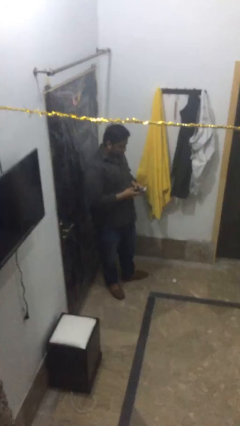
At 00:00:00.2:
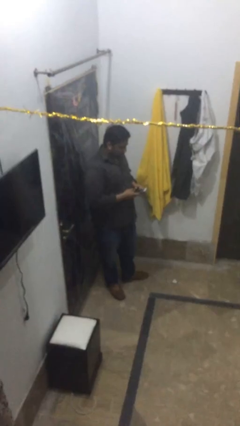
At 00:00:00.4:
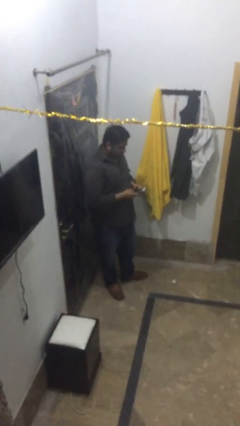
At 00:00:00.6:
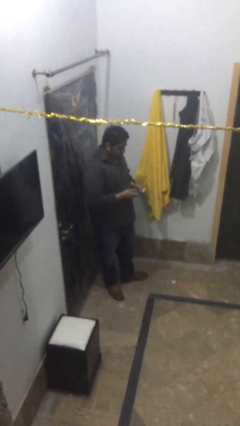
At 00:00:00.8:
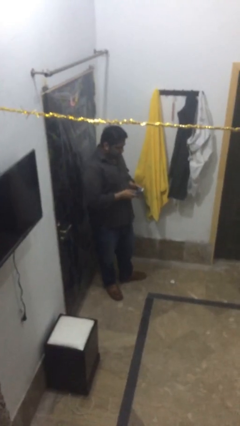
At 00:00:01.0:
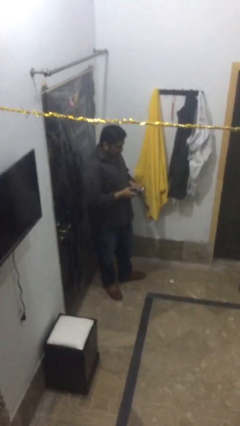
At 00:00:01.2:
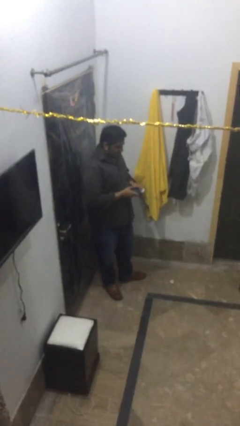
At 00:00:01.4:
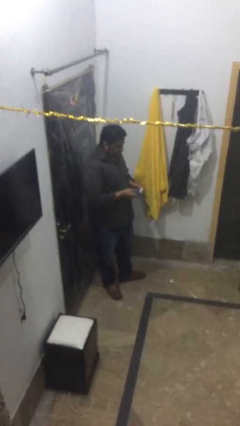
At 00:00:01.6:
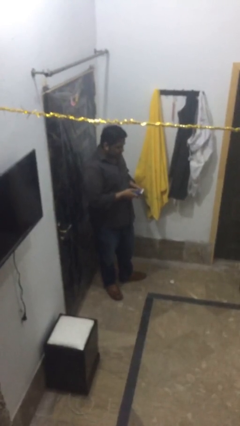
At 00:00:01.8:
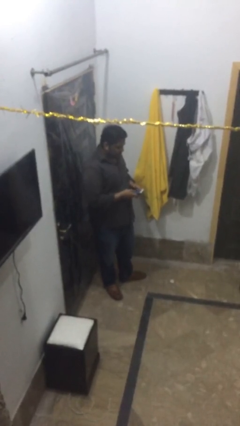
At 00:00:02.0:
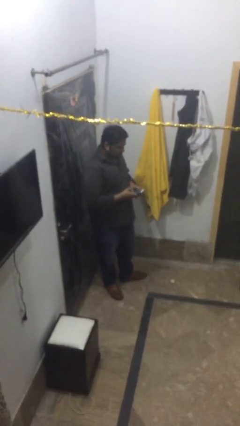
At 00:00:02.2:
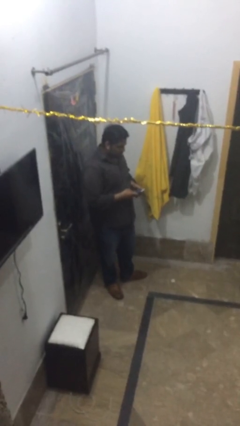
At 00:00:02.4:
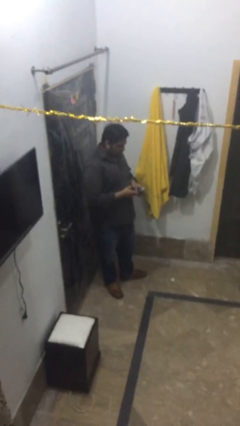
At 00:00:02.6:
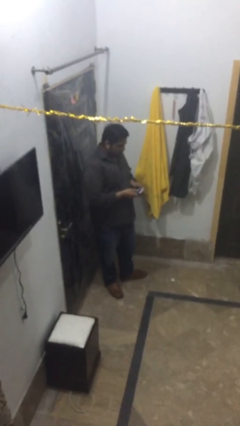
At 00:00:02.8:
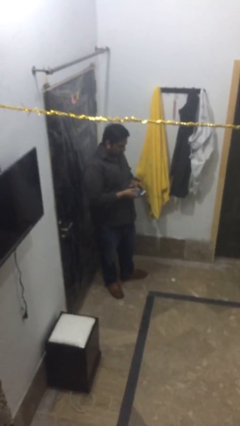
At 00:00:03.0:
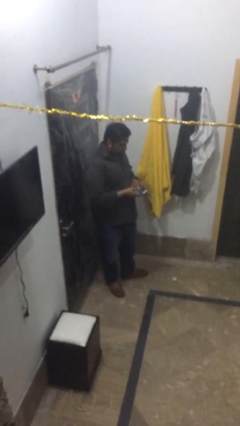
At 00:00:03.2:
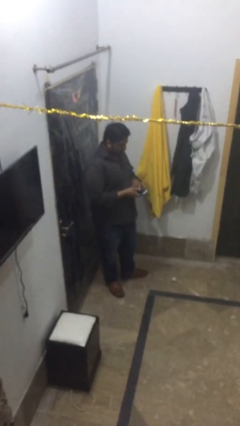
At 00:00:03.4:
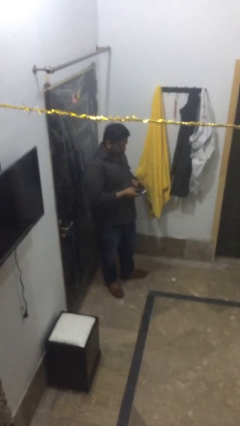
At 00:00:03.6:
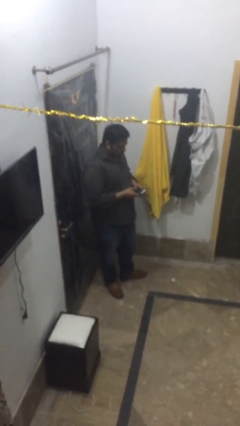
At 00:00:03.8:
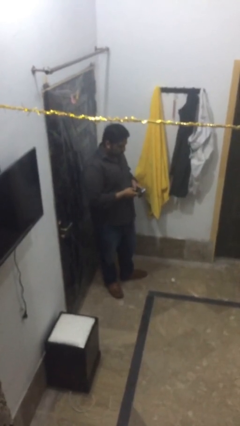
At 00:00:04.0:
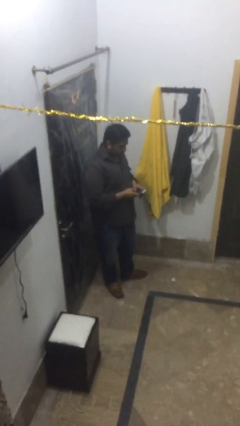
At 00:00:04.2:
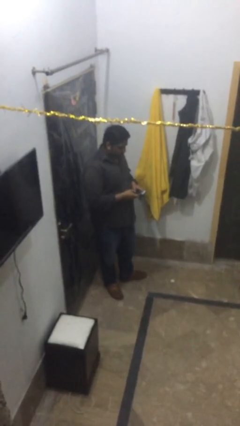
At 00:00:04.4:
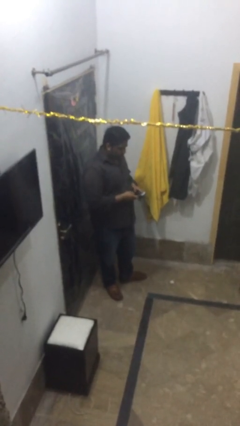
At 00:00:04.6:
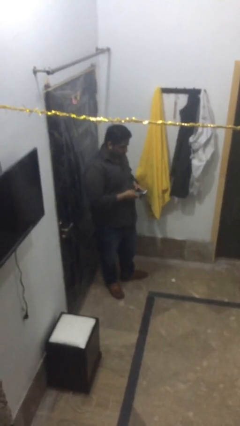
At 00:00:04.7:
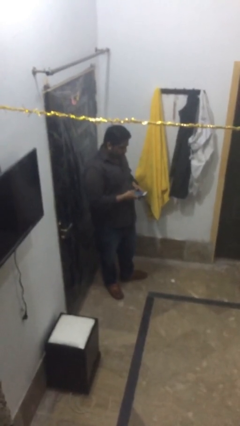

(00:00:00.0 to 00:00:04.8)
person texts on phone

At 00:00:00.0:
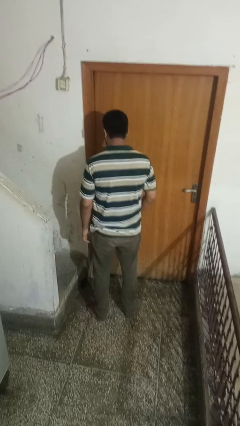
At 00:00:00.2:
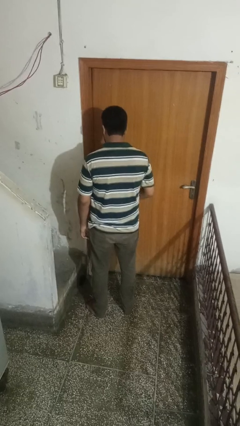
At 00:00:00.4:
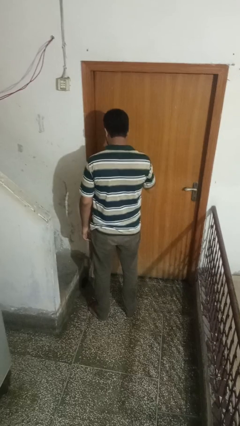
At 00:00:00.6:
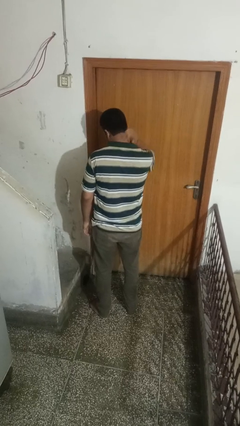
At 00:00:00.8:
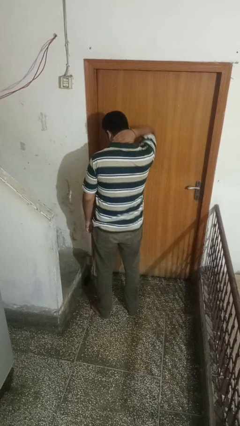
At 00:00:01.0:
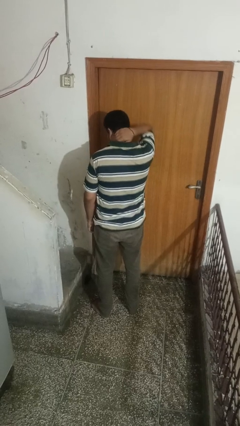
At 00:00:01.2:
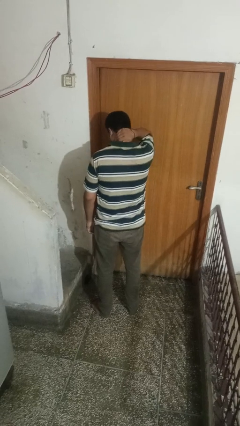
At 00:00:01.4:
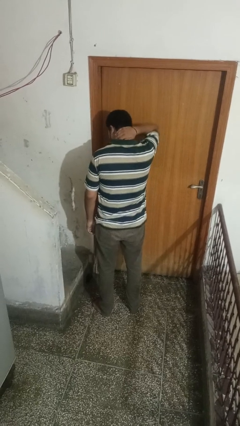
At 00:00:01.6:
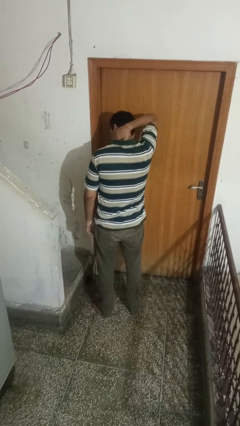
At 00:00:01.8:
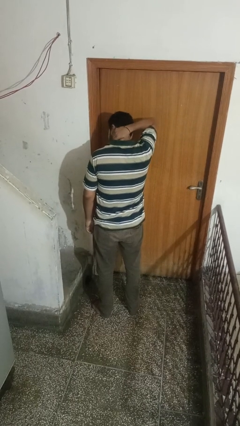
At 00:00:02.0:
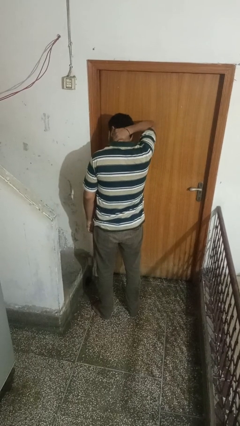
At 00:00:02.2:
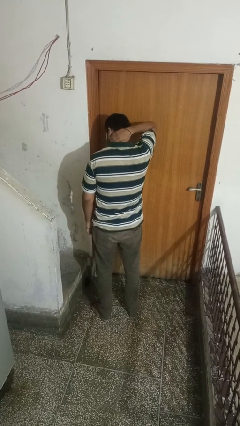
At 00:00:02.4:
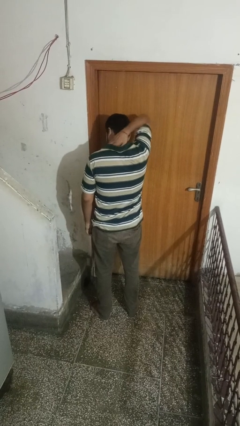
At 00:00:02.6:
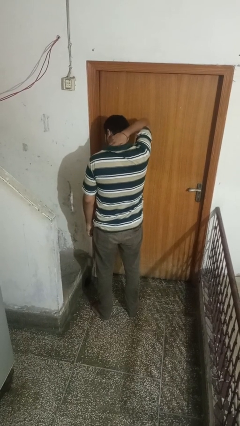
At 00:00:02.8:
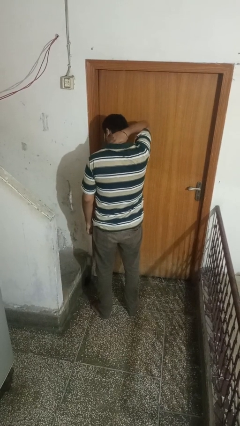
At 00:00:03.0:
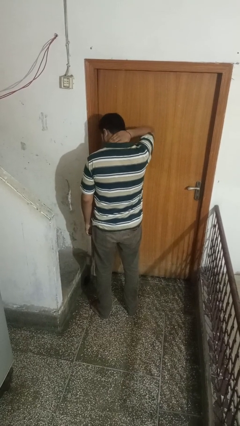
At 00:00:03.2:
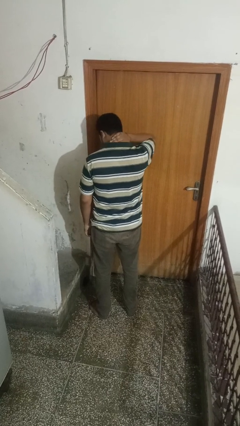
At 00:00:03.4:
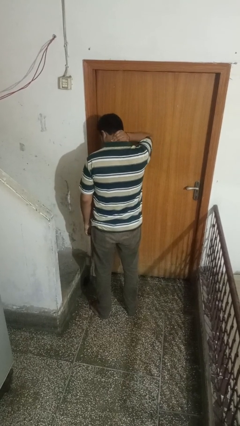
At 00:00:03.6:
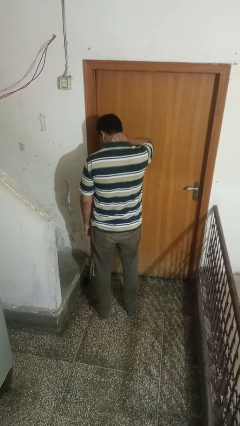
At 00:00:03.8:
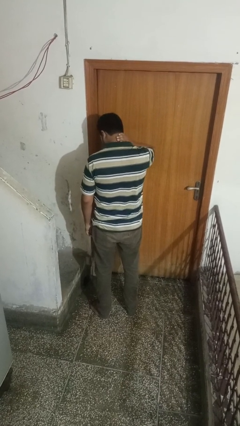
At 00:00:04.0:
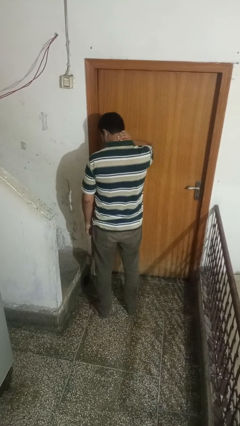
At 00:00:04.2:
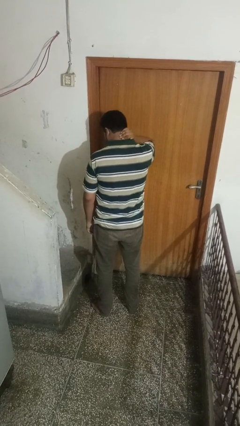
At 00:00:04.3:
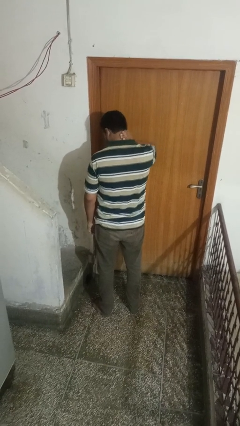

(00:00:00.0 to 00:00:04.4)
person rubs neck

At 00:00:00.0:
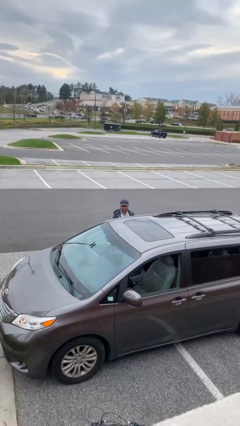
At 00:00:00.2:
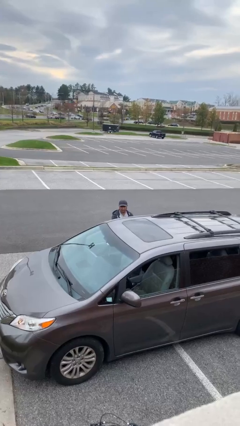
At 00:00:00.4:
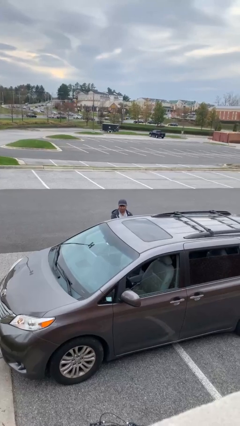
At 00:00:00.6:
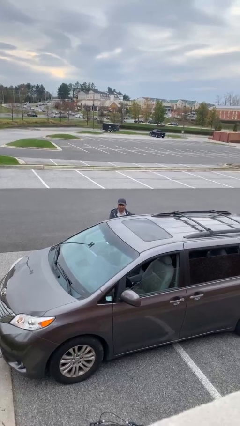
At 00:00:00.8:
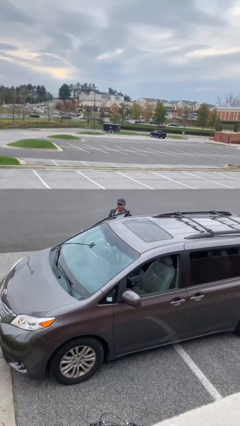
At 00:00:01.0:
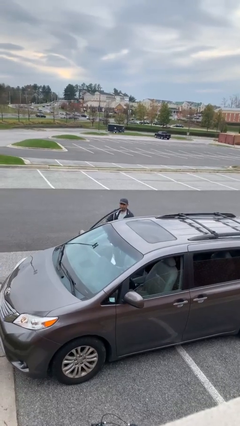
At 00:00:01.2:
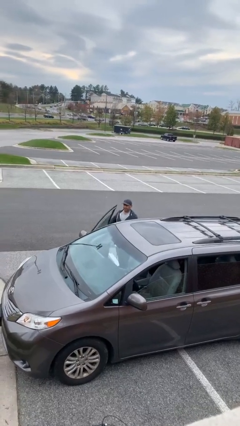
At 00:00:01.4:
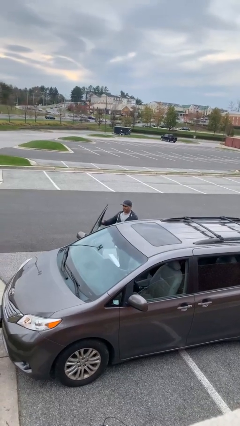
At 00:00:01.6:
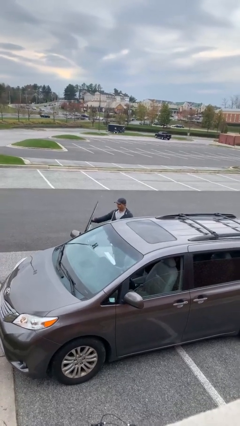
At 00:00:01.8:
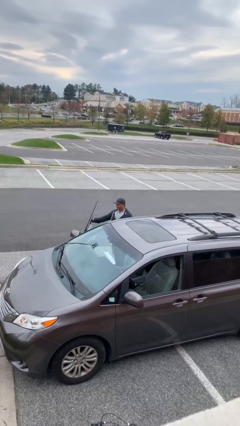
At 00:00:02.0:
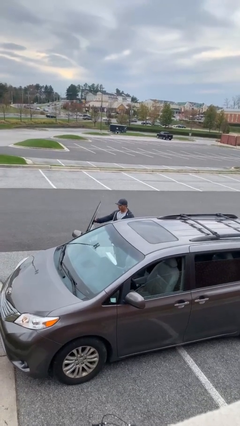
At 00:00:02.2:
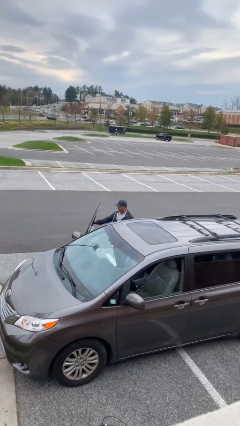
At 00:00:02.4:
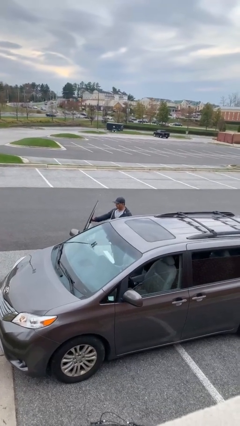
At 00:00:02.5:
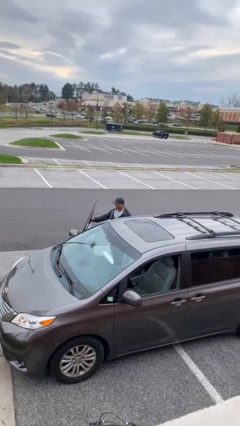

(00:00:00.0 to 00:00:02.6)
person opens car door

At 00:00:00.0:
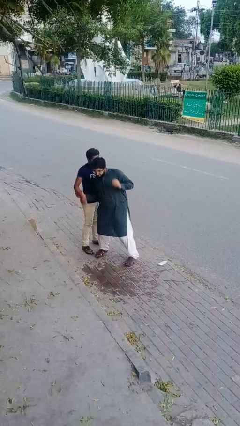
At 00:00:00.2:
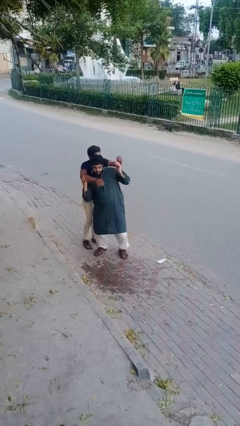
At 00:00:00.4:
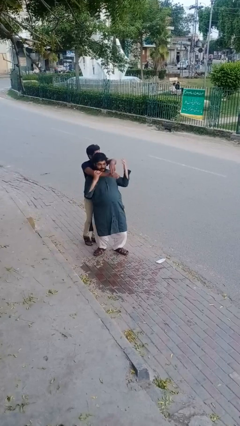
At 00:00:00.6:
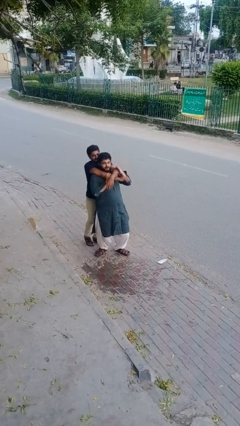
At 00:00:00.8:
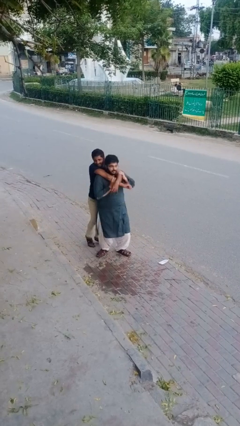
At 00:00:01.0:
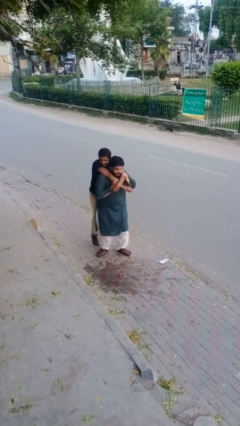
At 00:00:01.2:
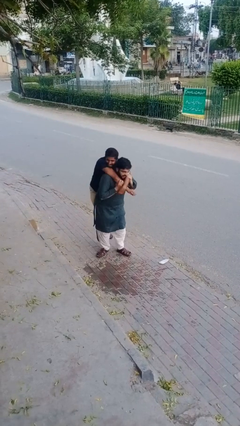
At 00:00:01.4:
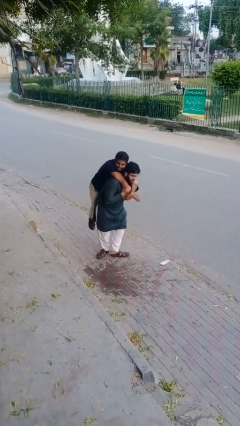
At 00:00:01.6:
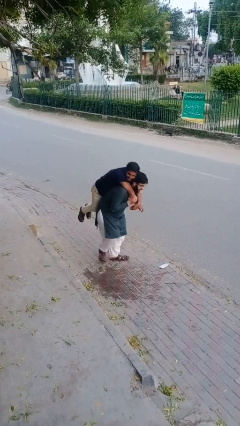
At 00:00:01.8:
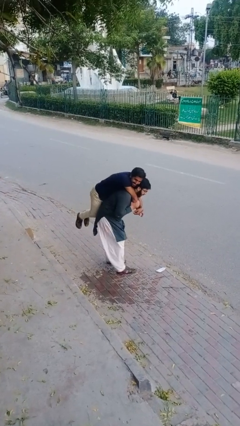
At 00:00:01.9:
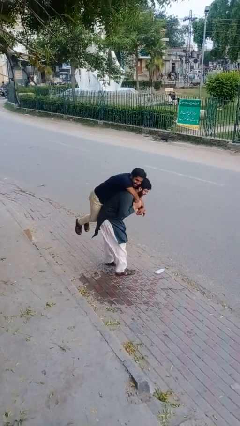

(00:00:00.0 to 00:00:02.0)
person carries person over shoulder

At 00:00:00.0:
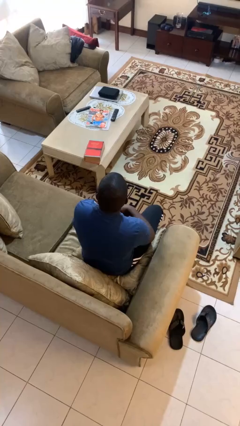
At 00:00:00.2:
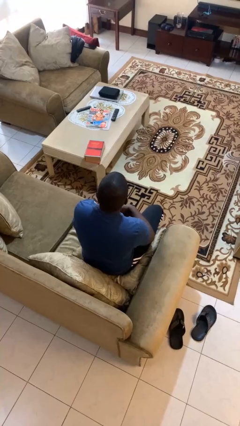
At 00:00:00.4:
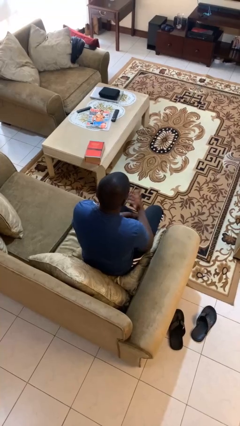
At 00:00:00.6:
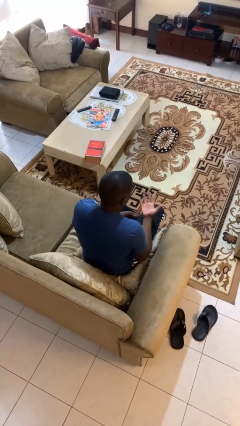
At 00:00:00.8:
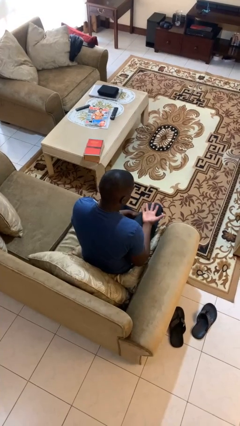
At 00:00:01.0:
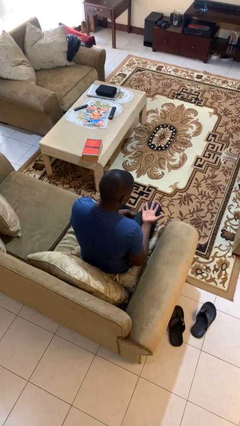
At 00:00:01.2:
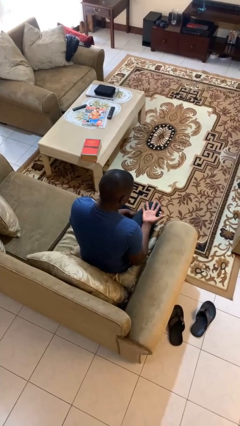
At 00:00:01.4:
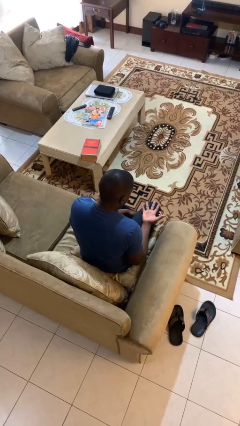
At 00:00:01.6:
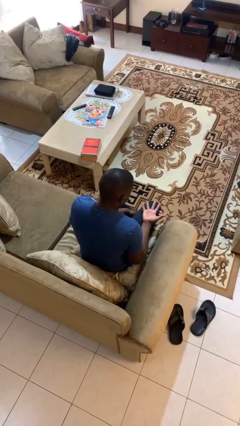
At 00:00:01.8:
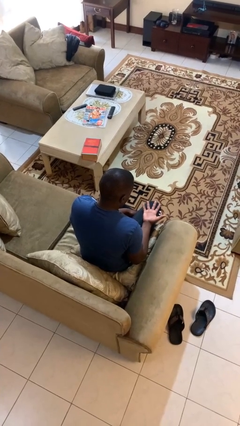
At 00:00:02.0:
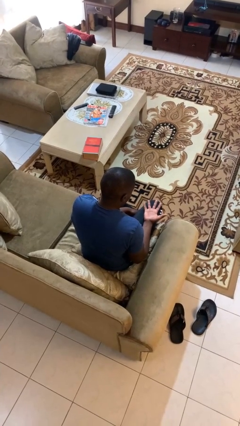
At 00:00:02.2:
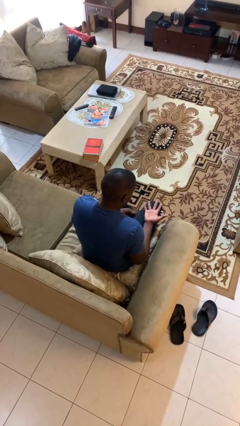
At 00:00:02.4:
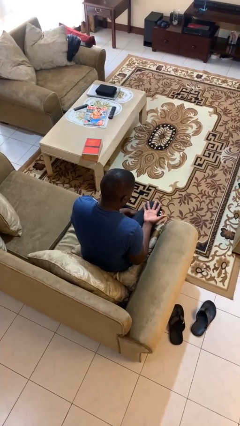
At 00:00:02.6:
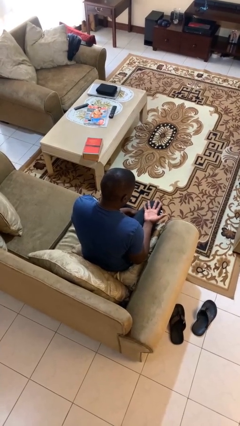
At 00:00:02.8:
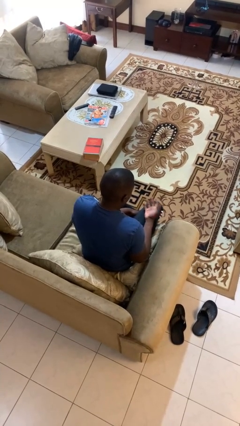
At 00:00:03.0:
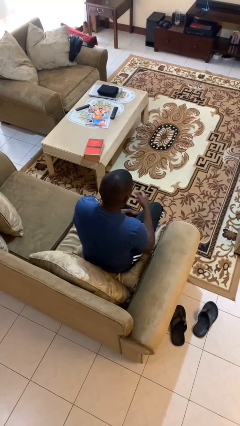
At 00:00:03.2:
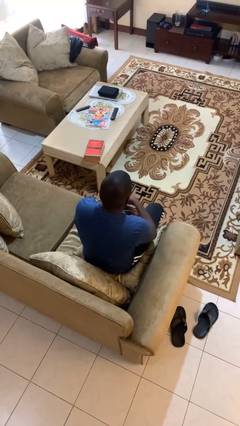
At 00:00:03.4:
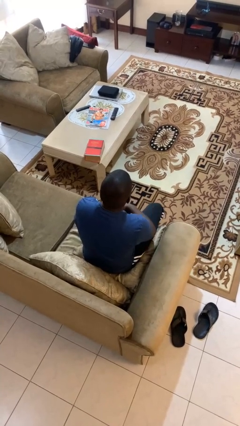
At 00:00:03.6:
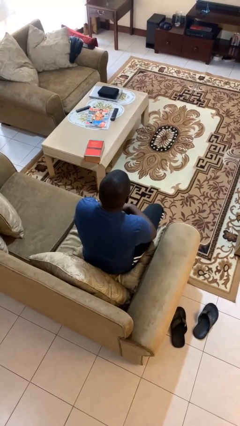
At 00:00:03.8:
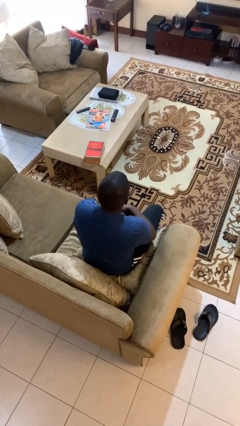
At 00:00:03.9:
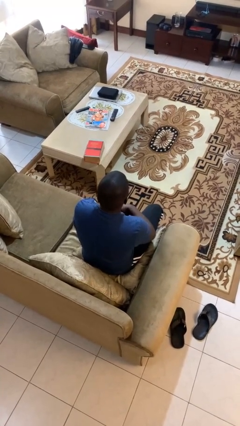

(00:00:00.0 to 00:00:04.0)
person looks at hands in lap
